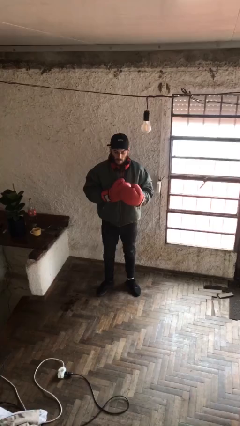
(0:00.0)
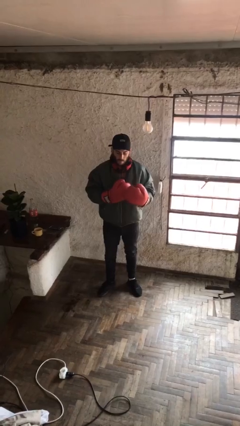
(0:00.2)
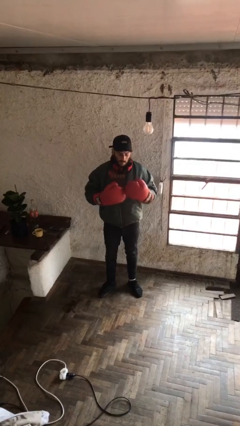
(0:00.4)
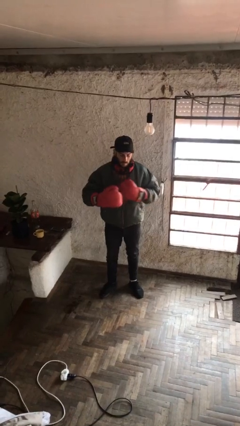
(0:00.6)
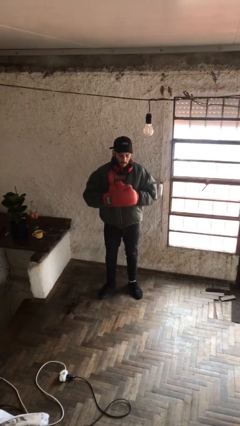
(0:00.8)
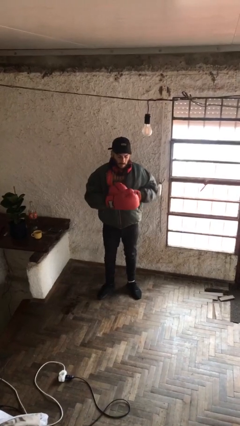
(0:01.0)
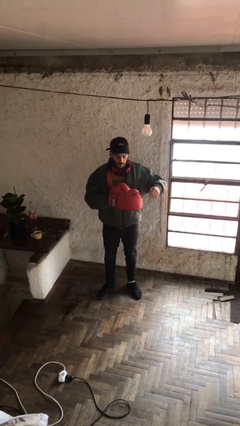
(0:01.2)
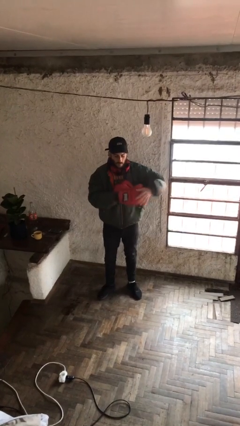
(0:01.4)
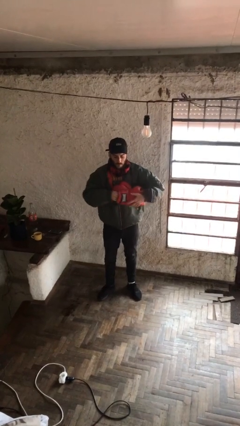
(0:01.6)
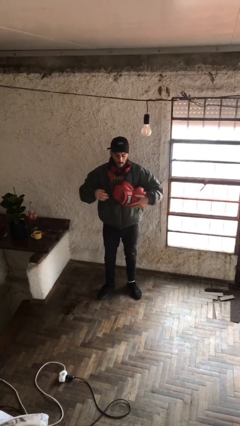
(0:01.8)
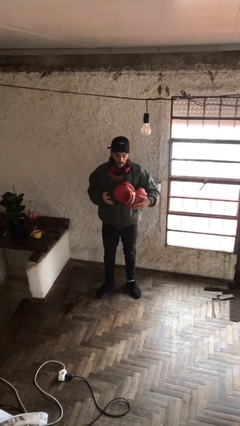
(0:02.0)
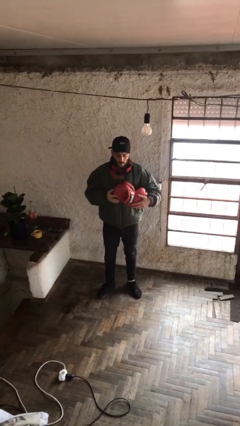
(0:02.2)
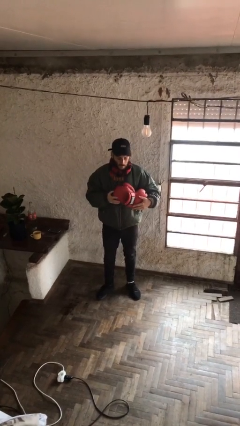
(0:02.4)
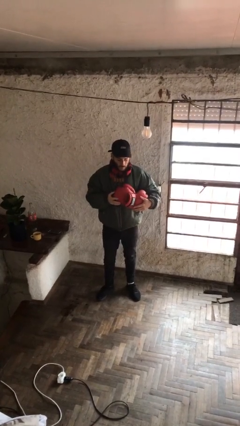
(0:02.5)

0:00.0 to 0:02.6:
person takes off gloves

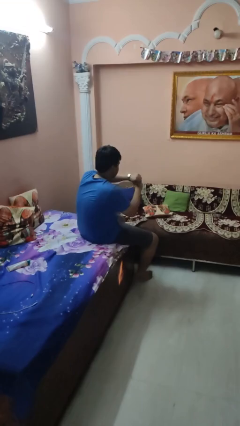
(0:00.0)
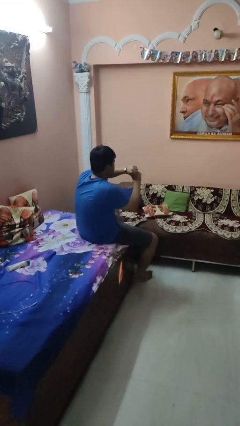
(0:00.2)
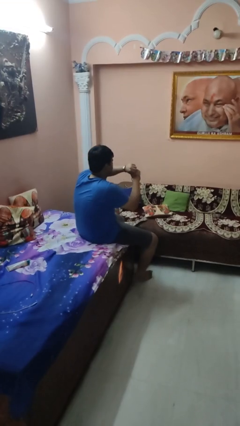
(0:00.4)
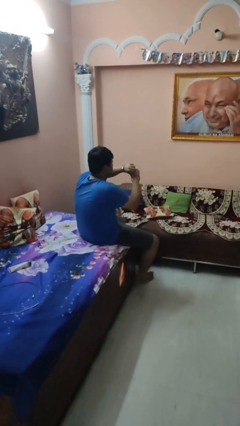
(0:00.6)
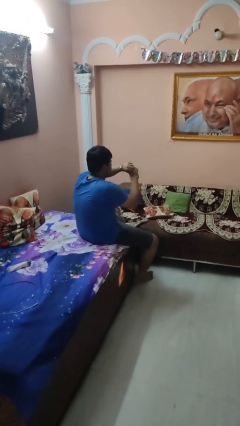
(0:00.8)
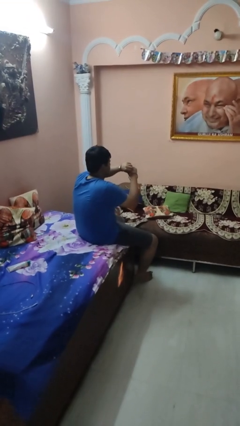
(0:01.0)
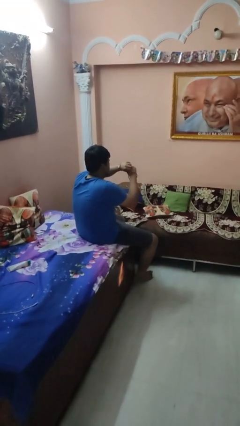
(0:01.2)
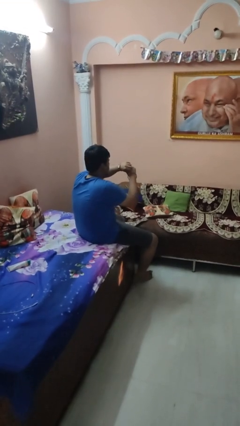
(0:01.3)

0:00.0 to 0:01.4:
person looks at wristwatch

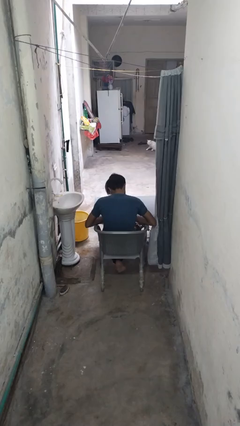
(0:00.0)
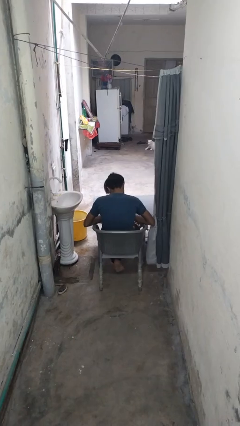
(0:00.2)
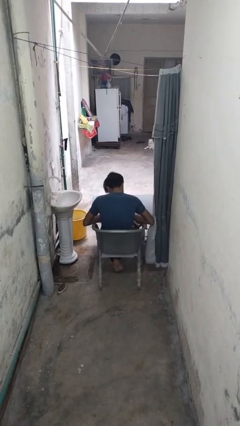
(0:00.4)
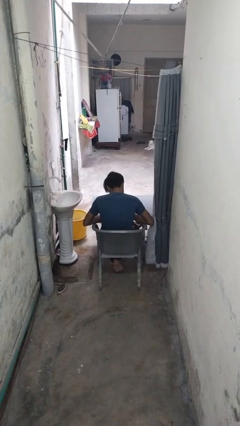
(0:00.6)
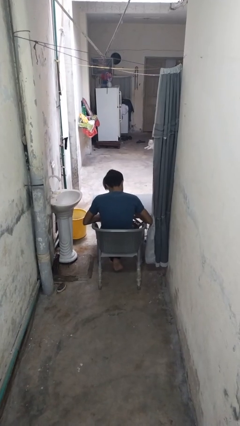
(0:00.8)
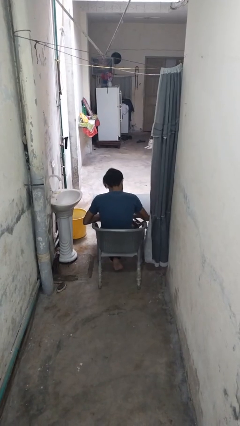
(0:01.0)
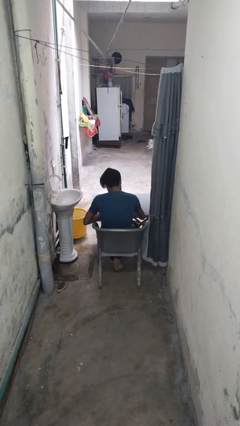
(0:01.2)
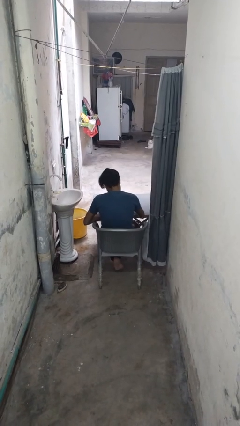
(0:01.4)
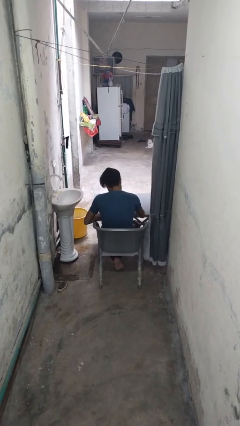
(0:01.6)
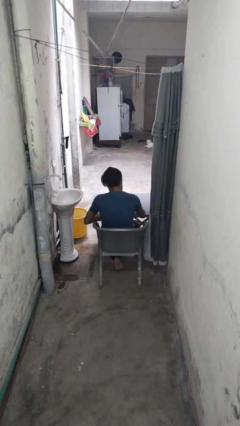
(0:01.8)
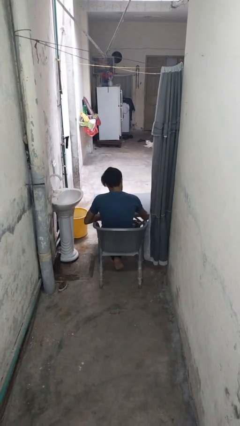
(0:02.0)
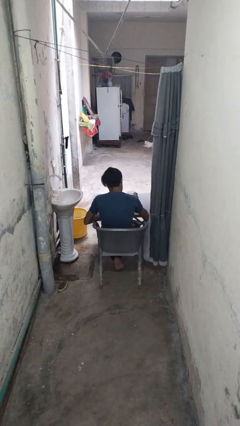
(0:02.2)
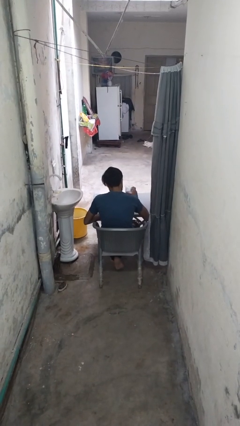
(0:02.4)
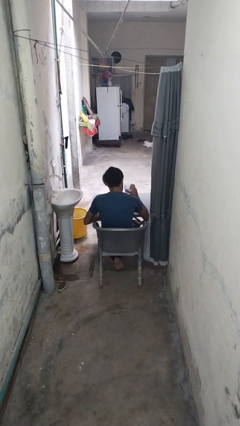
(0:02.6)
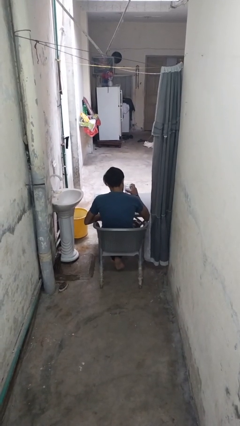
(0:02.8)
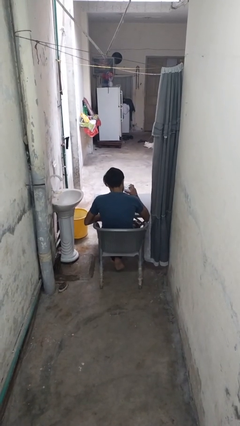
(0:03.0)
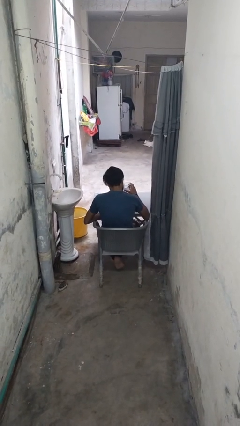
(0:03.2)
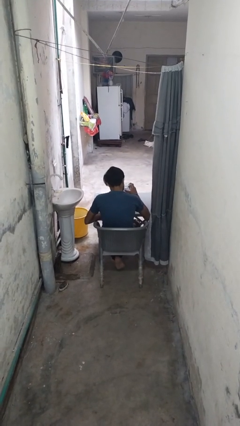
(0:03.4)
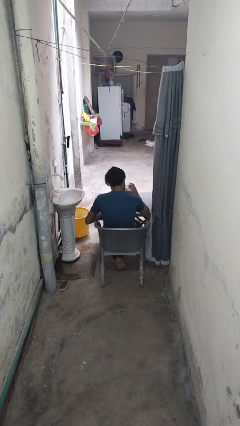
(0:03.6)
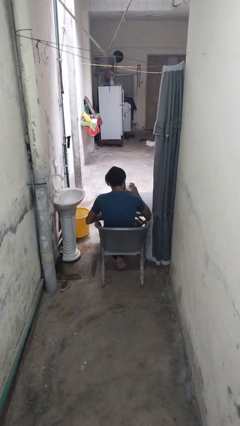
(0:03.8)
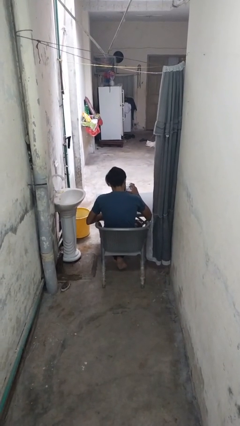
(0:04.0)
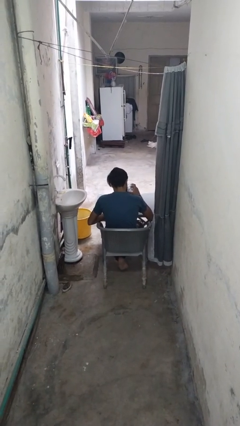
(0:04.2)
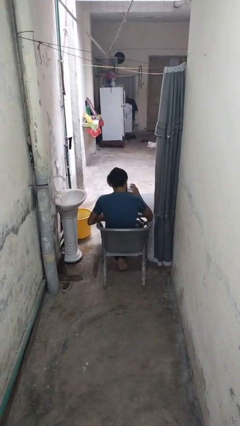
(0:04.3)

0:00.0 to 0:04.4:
person picks up object from table

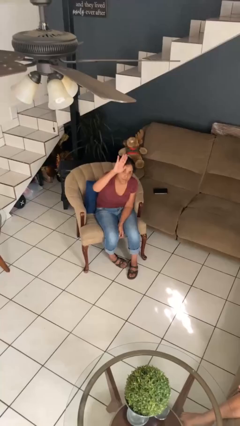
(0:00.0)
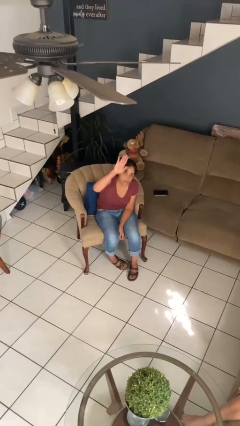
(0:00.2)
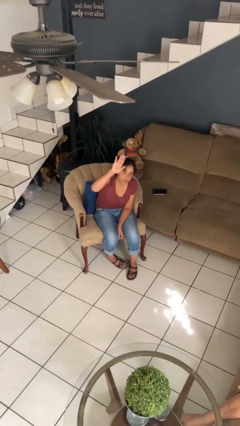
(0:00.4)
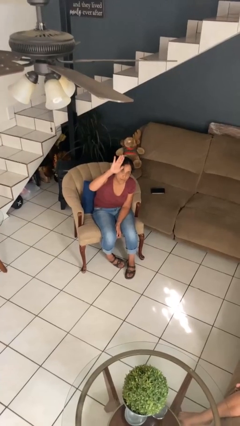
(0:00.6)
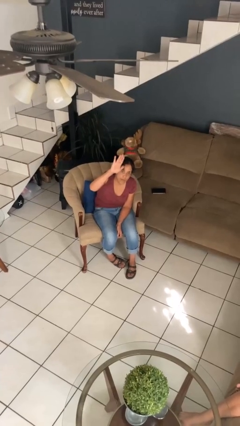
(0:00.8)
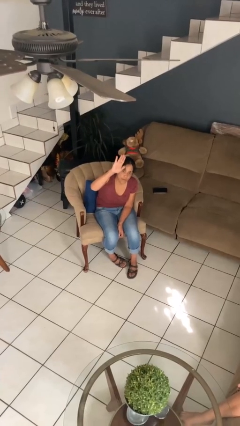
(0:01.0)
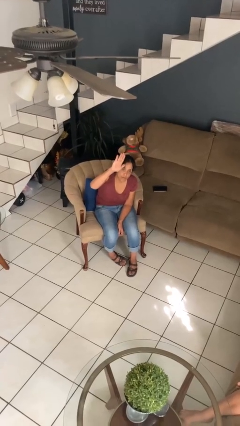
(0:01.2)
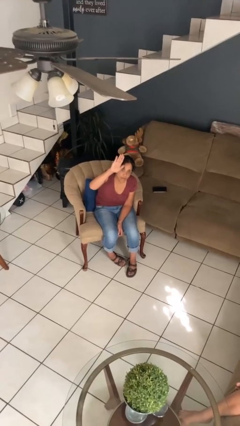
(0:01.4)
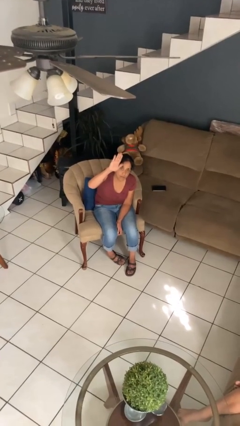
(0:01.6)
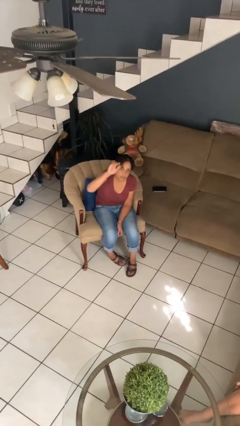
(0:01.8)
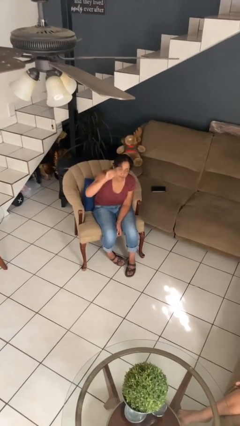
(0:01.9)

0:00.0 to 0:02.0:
person gestures raise hand

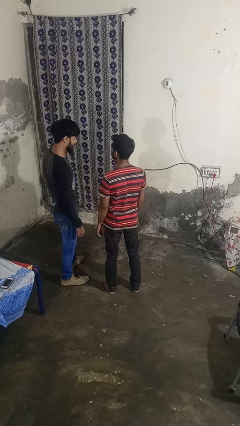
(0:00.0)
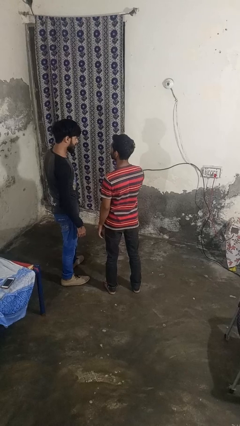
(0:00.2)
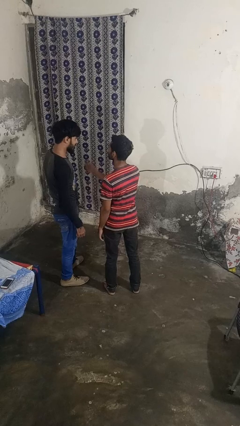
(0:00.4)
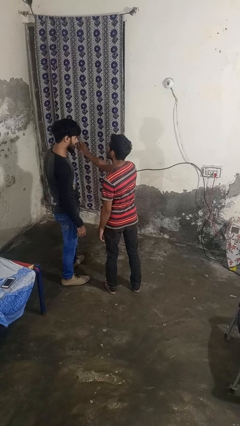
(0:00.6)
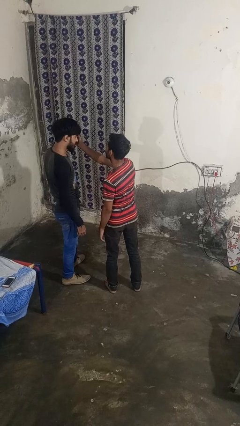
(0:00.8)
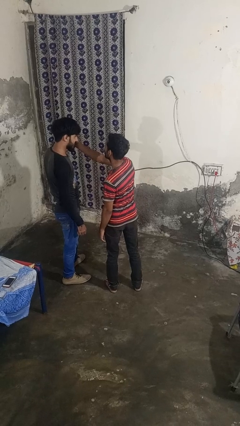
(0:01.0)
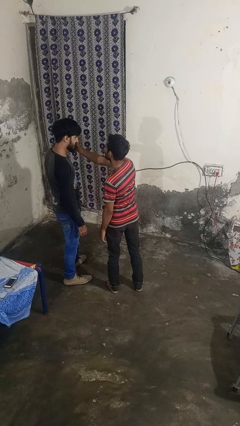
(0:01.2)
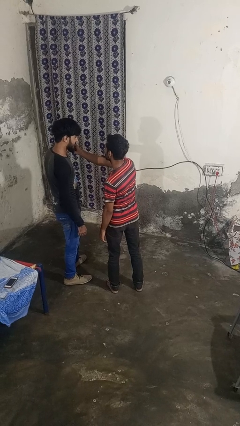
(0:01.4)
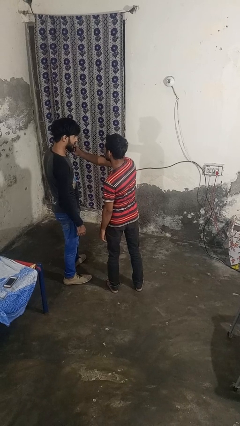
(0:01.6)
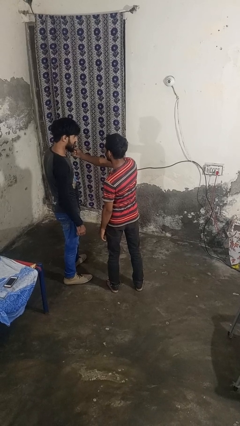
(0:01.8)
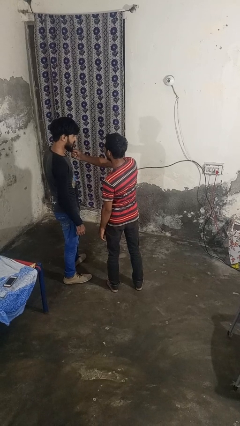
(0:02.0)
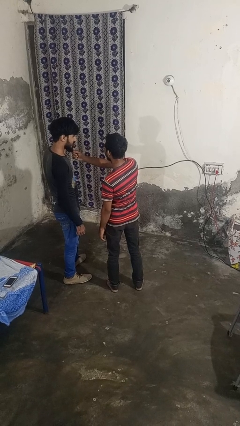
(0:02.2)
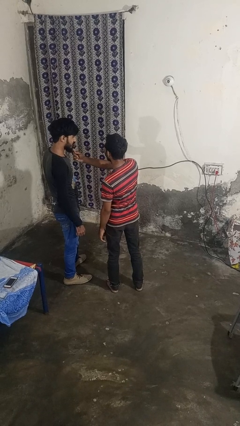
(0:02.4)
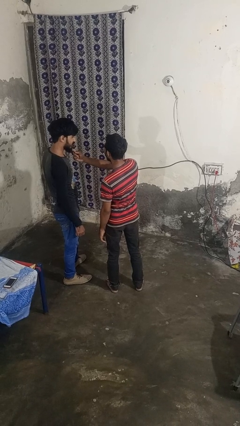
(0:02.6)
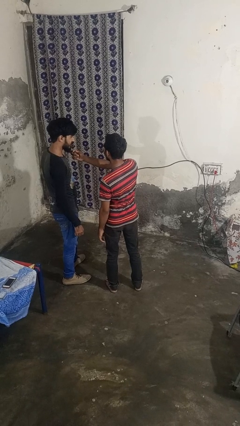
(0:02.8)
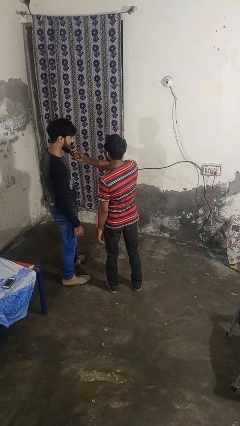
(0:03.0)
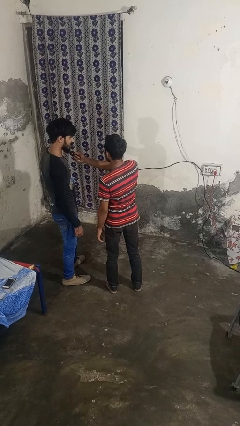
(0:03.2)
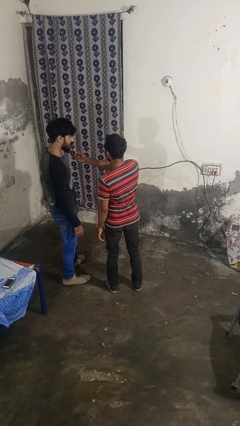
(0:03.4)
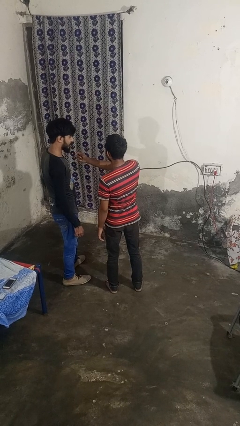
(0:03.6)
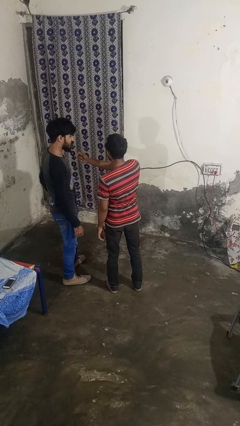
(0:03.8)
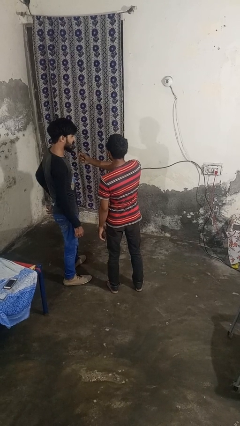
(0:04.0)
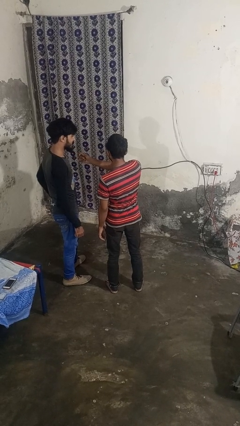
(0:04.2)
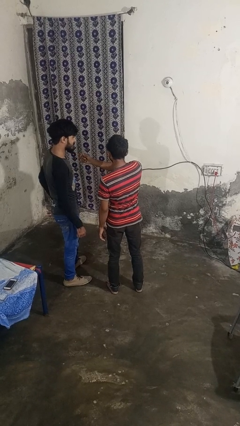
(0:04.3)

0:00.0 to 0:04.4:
person touches face of person

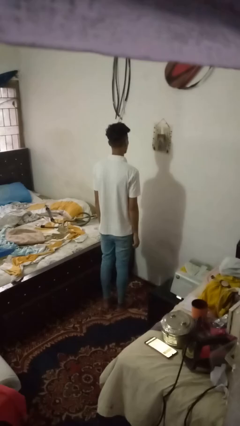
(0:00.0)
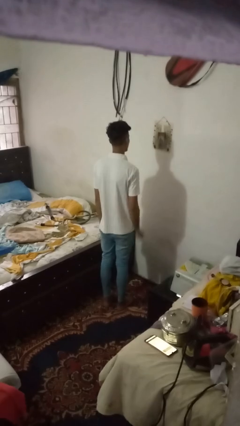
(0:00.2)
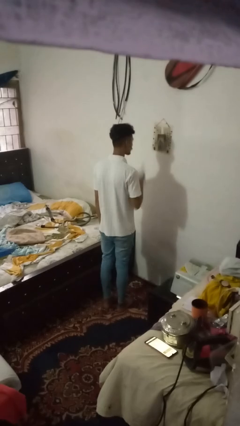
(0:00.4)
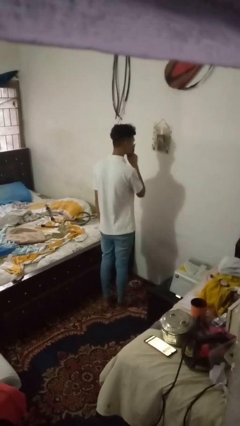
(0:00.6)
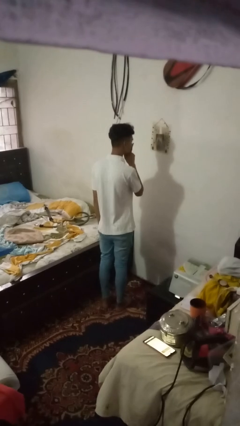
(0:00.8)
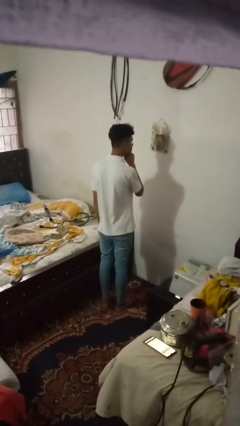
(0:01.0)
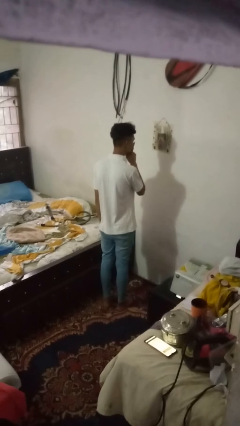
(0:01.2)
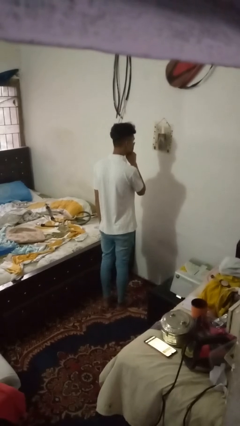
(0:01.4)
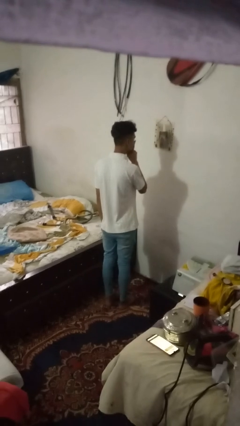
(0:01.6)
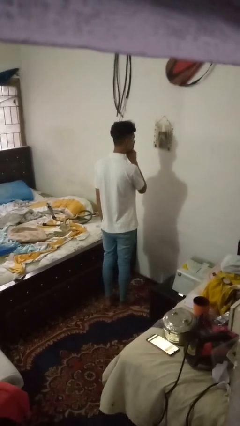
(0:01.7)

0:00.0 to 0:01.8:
person gestures be quiet

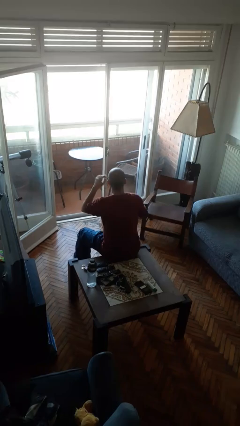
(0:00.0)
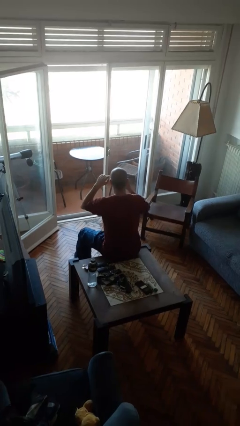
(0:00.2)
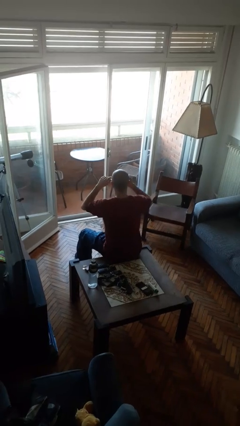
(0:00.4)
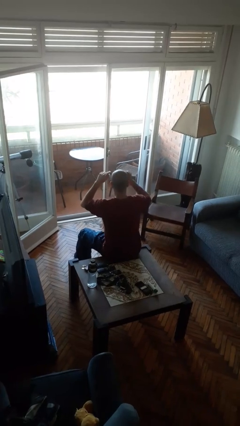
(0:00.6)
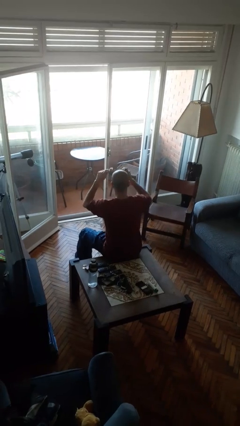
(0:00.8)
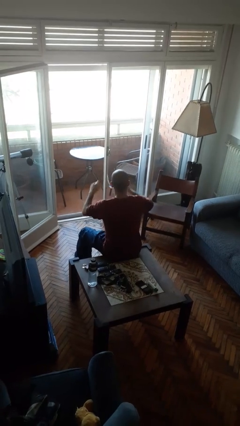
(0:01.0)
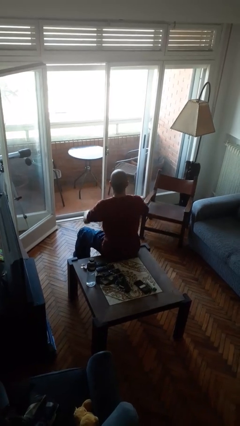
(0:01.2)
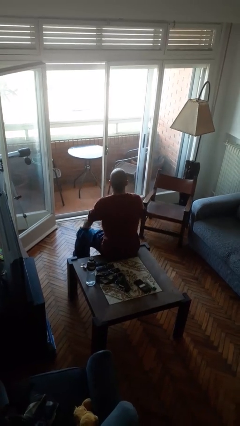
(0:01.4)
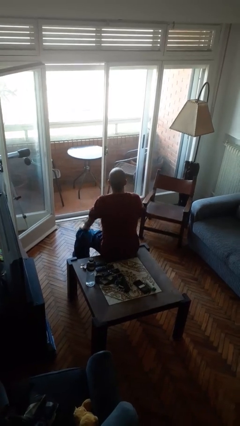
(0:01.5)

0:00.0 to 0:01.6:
person takes off sunglasses
